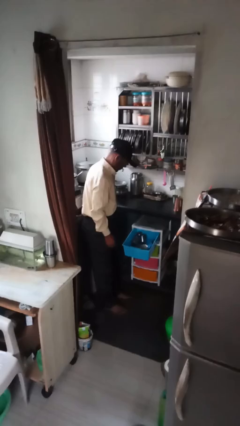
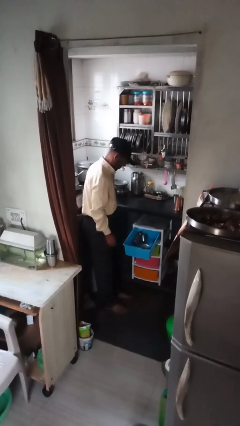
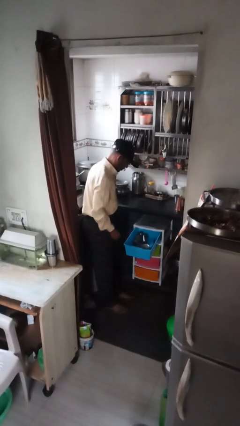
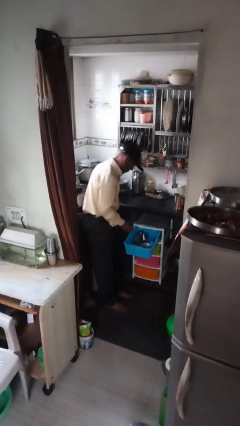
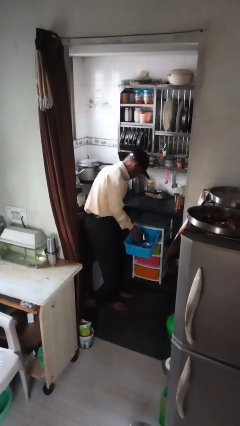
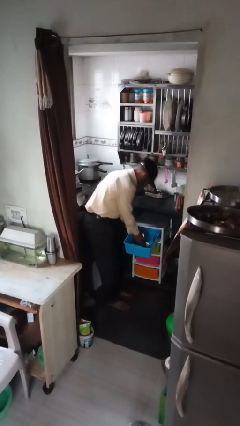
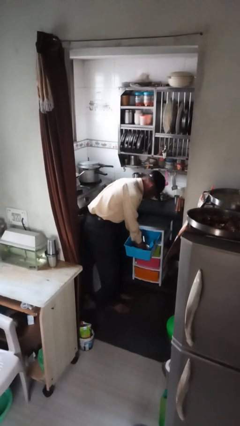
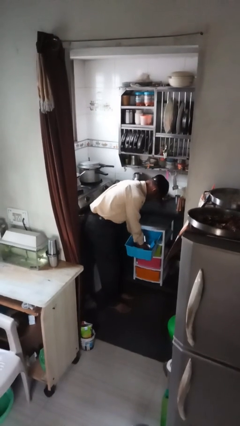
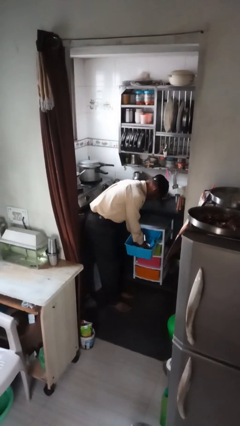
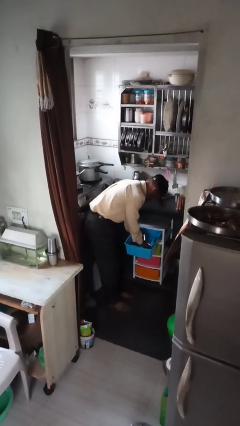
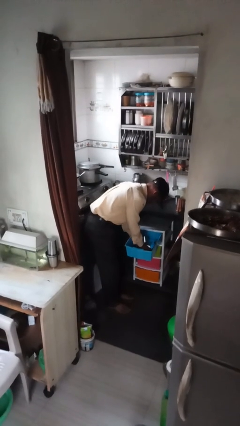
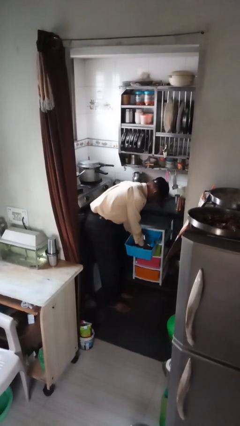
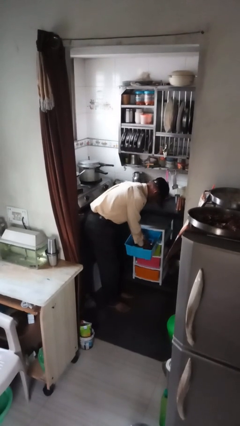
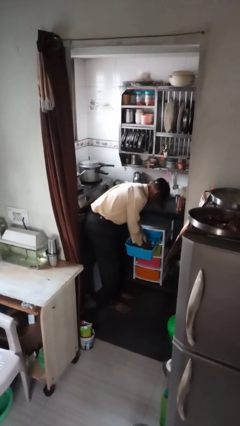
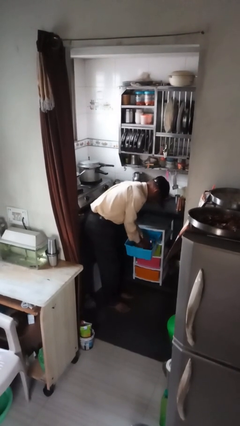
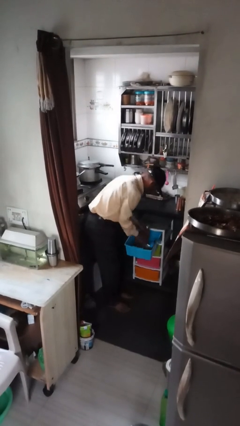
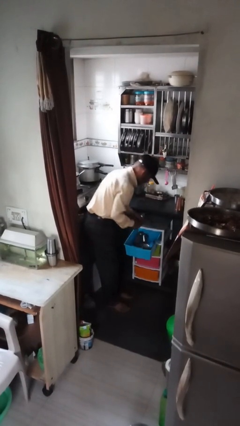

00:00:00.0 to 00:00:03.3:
person takes object from kitchen drawer

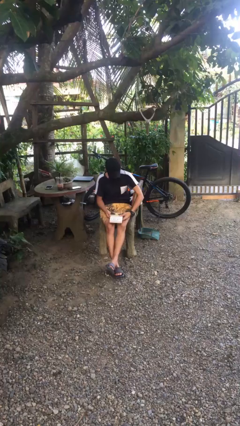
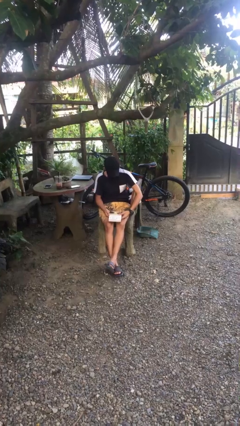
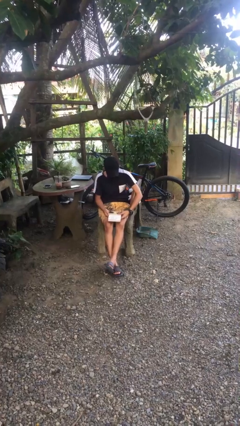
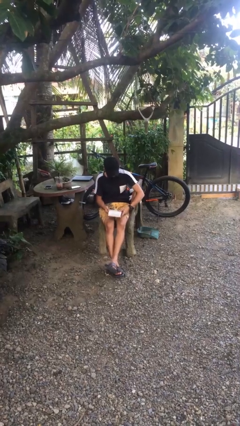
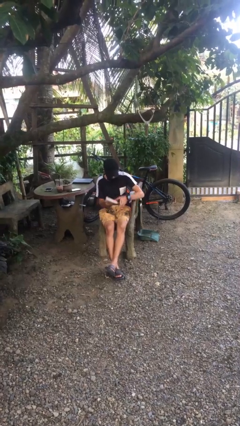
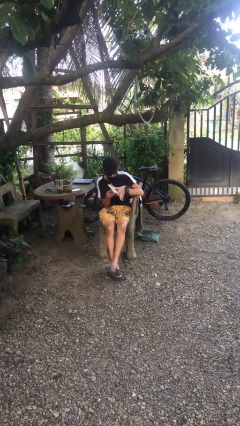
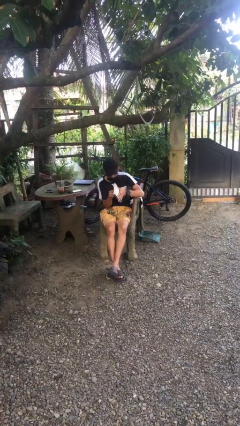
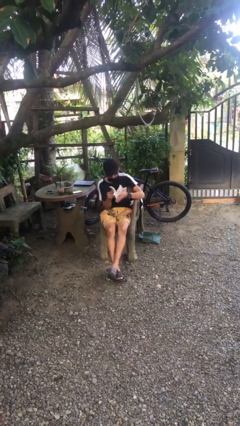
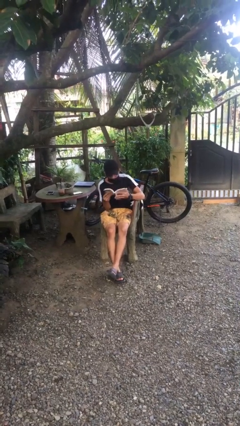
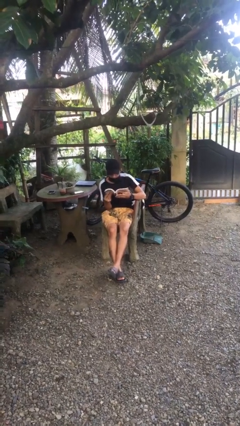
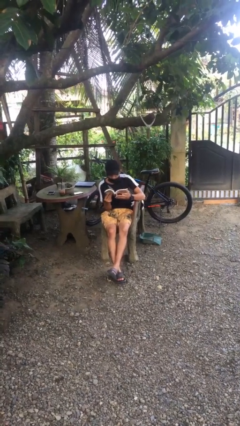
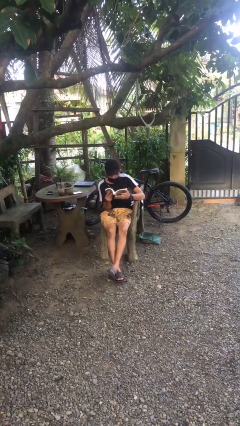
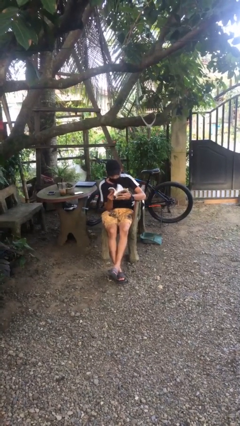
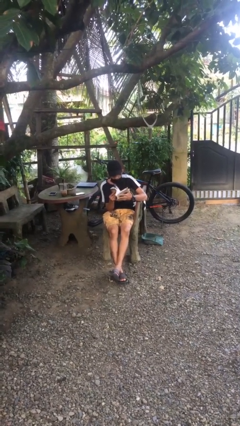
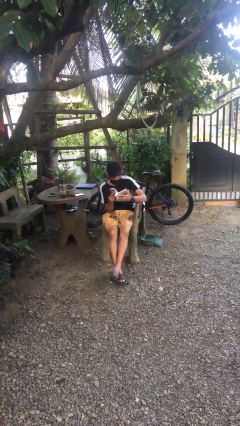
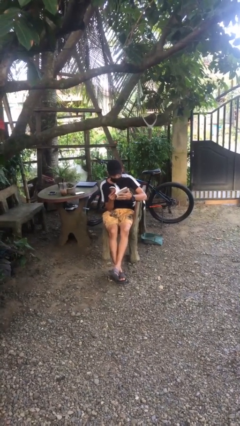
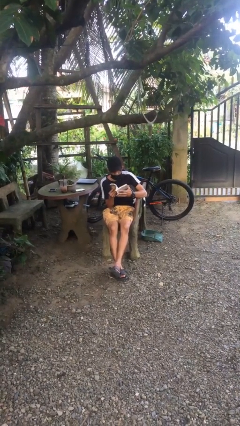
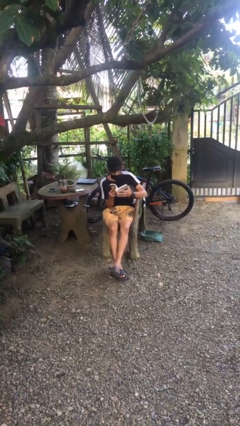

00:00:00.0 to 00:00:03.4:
person reads document

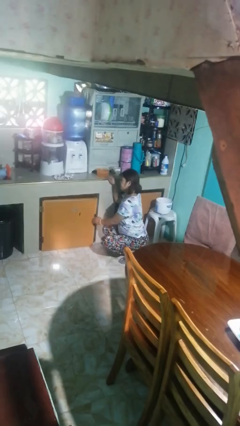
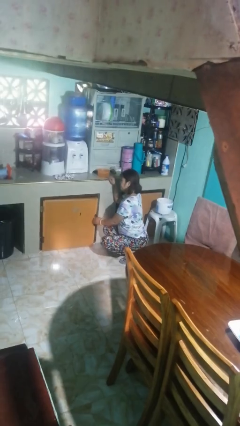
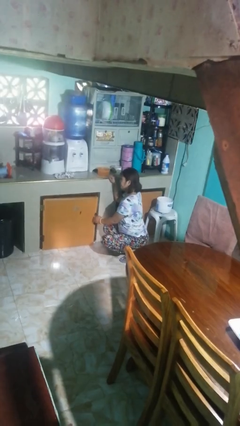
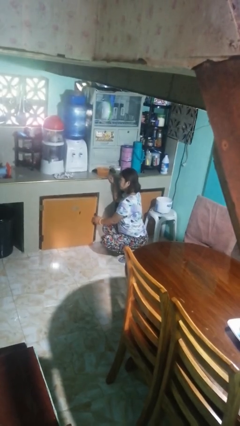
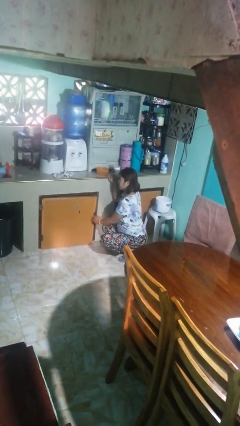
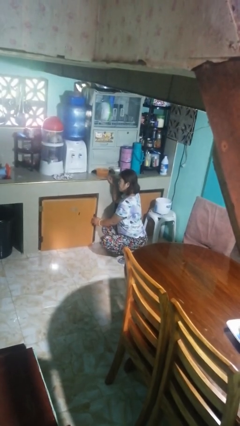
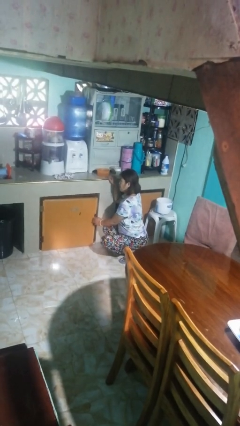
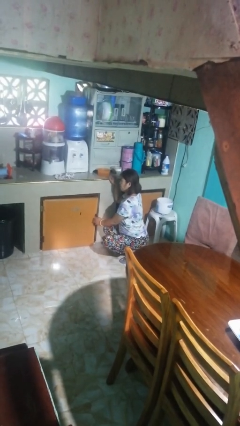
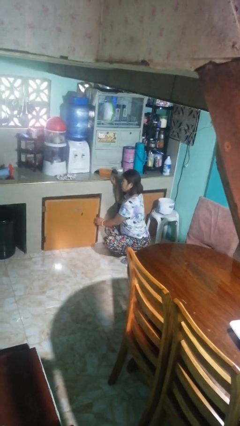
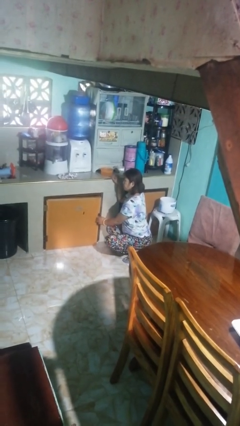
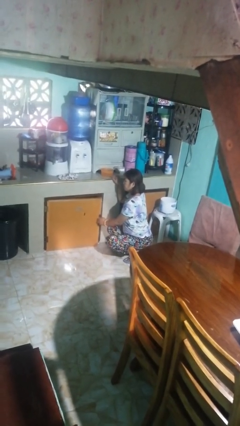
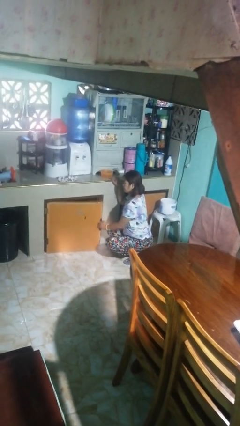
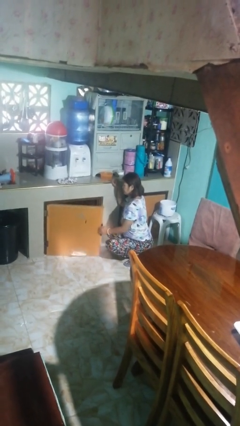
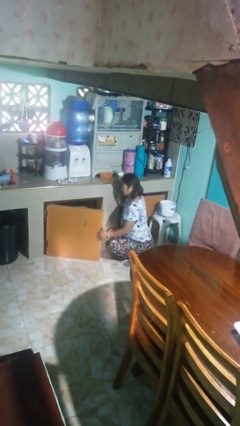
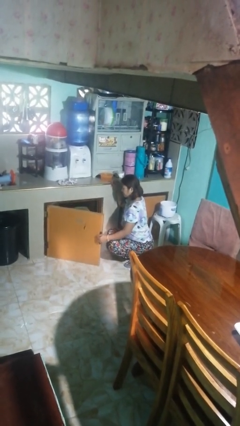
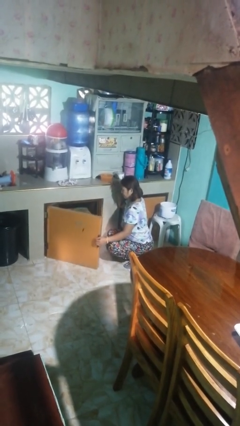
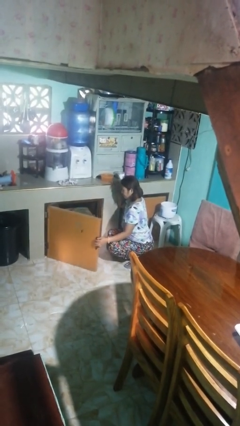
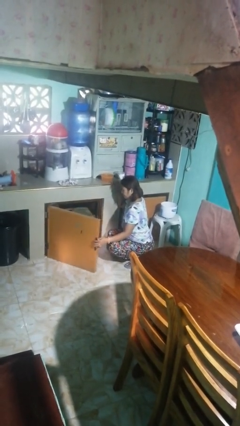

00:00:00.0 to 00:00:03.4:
person opens cabinet

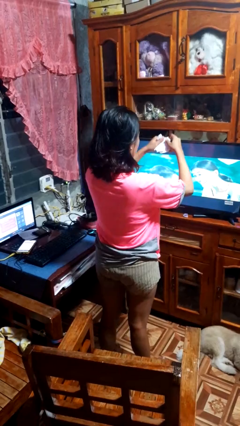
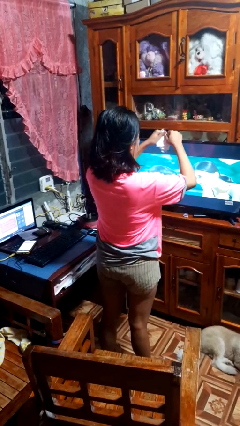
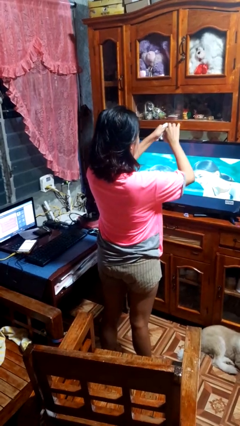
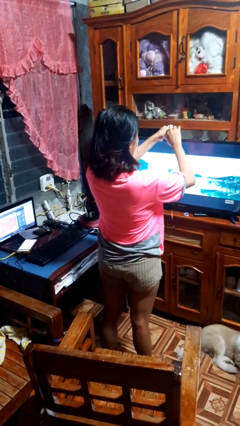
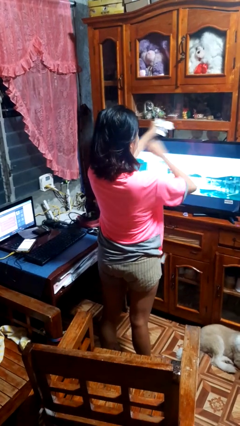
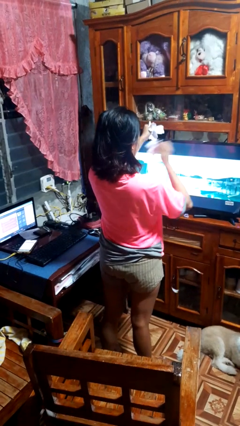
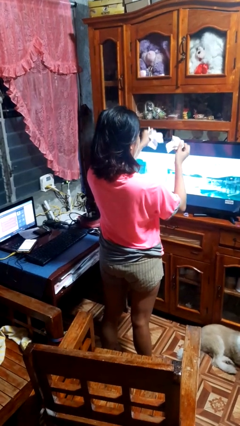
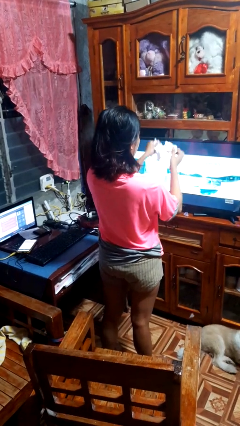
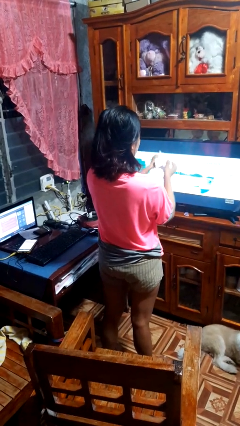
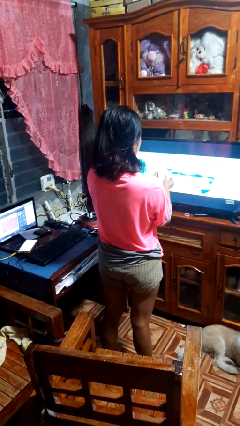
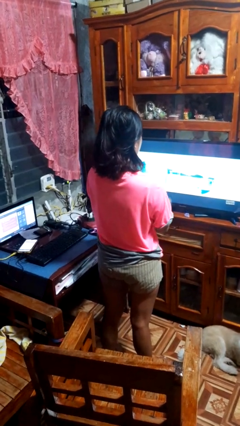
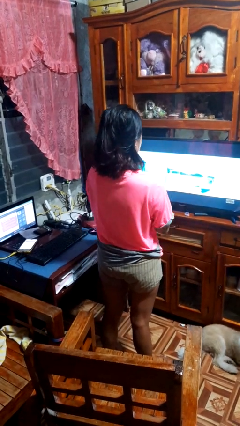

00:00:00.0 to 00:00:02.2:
person tears paper

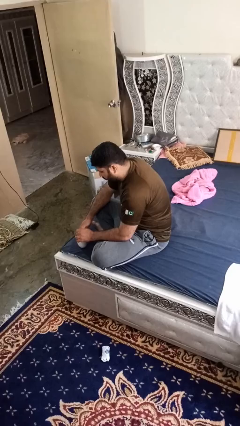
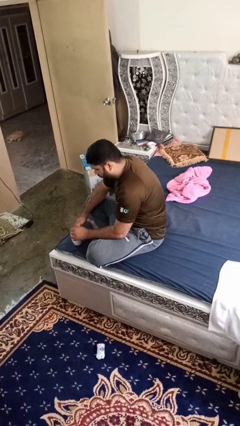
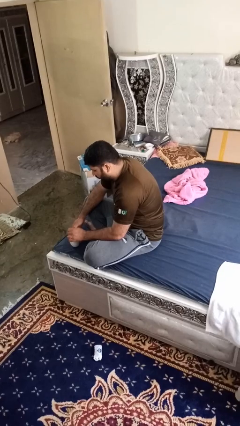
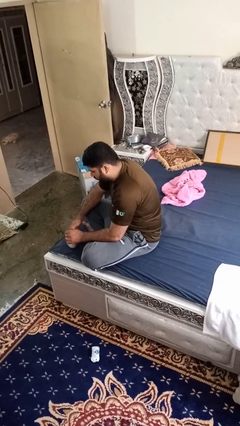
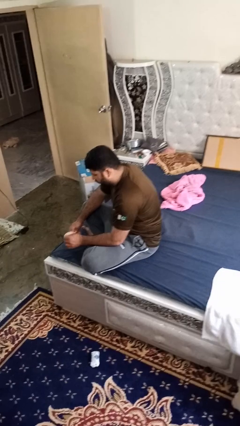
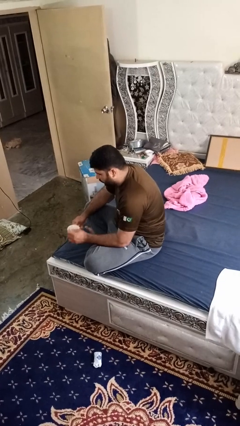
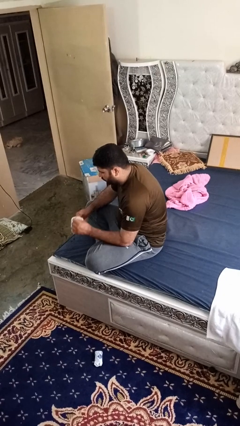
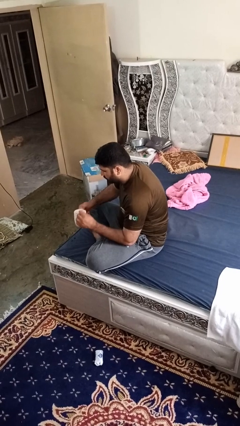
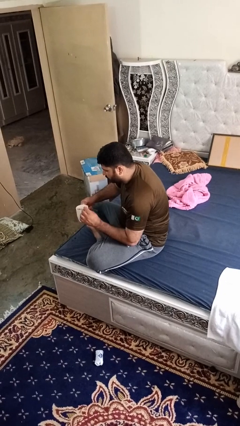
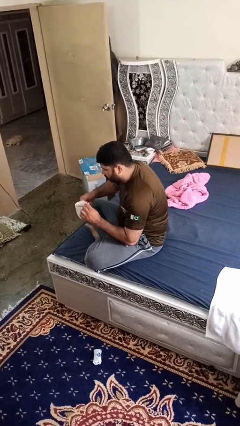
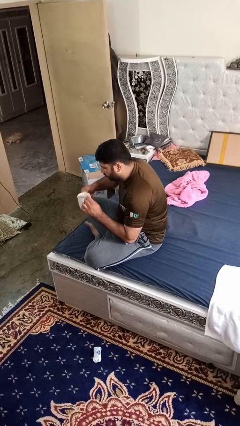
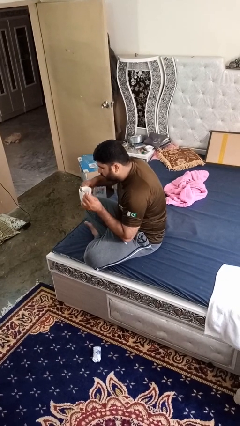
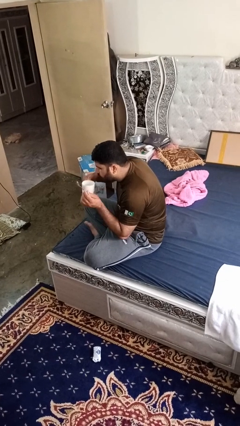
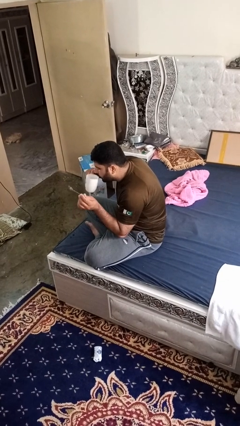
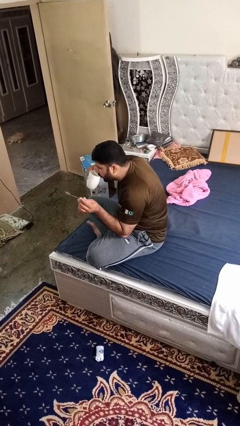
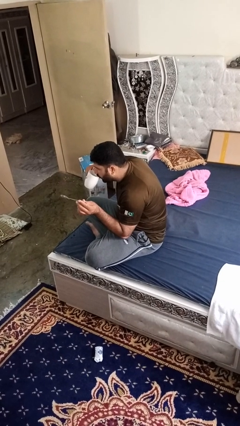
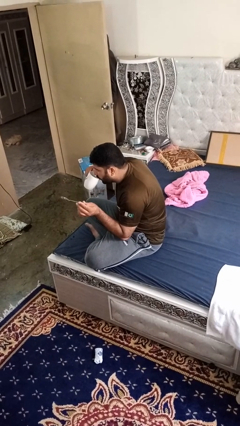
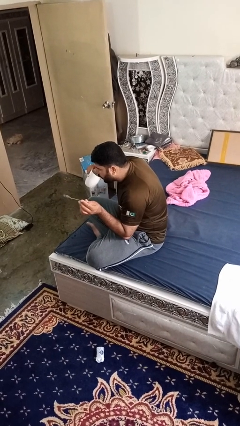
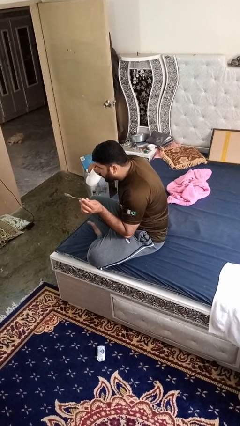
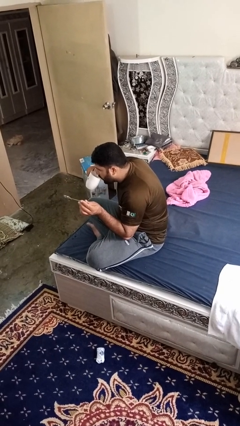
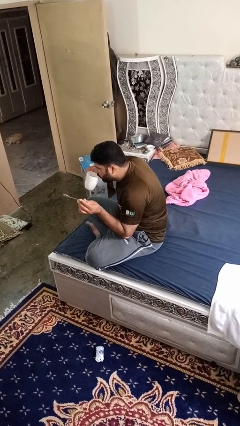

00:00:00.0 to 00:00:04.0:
person drinks from mug

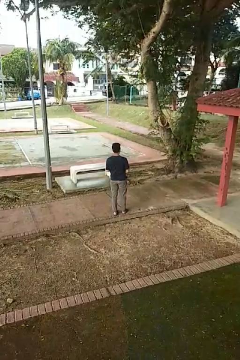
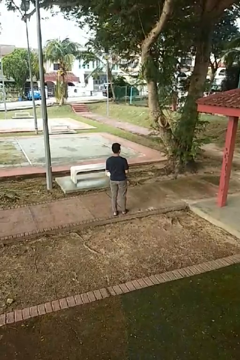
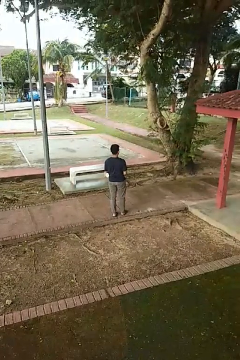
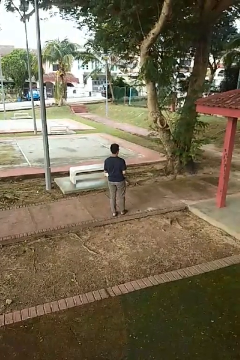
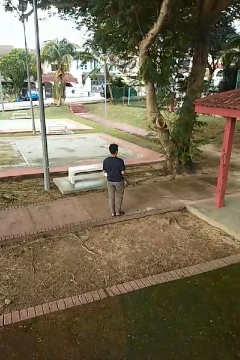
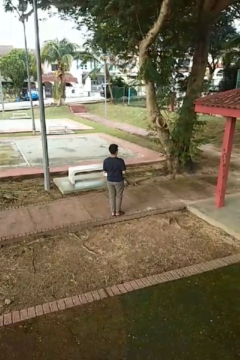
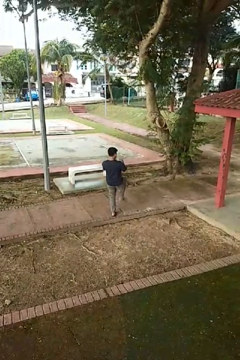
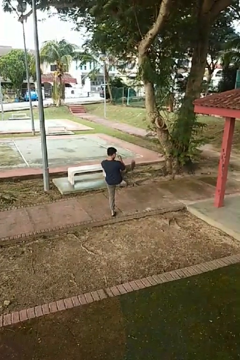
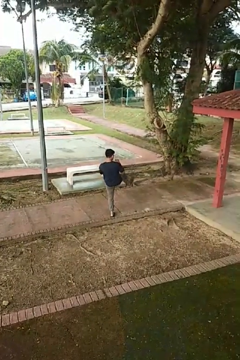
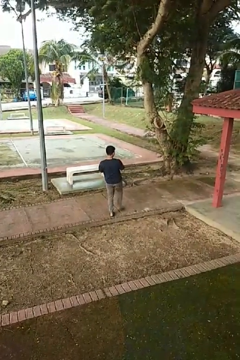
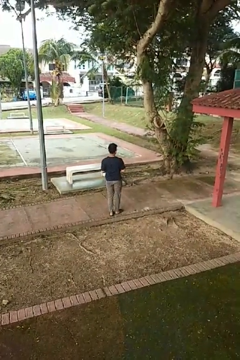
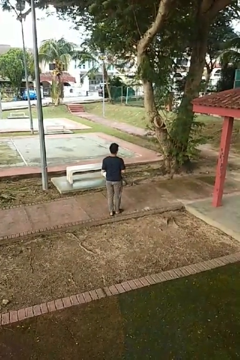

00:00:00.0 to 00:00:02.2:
person karate kicks
